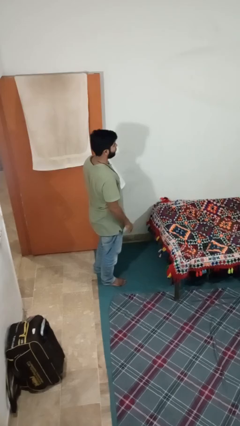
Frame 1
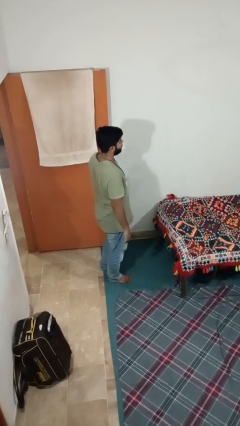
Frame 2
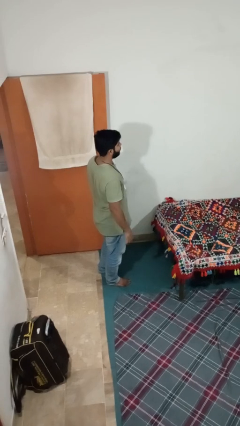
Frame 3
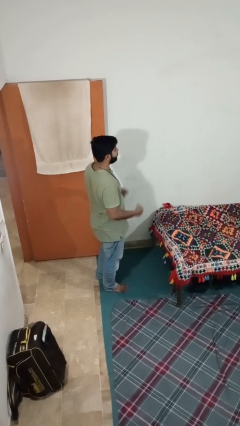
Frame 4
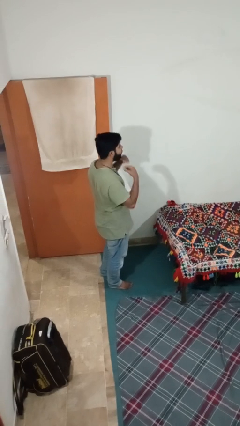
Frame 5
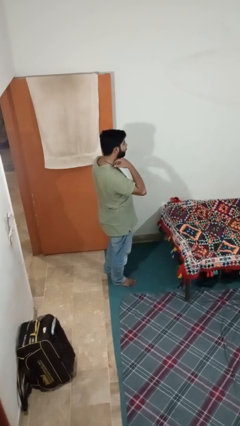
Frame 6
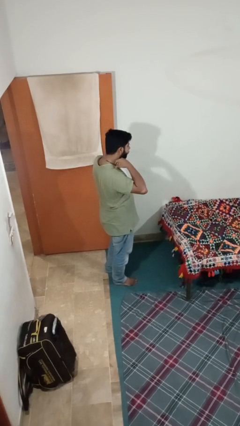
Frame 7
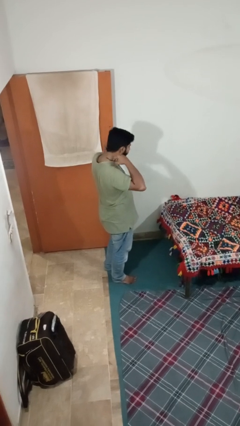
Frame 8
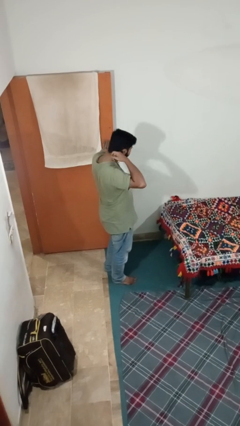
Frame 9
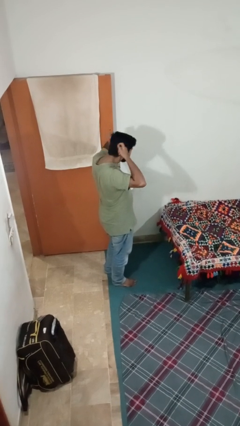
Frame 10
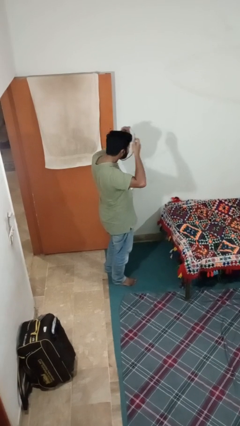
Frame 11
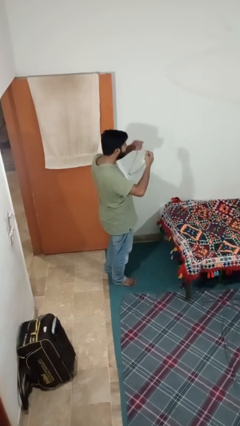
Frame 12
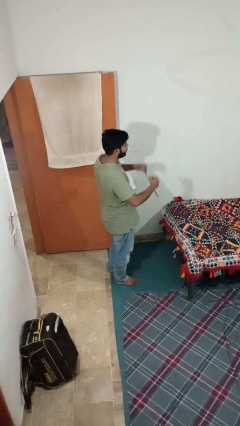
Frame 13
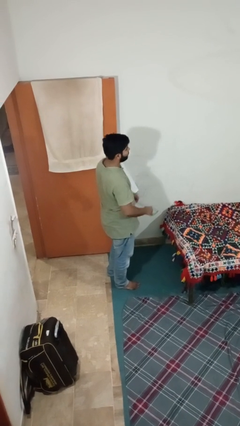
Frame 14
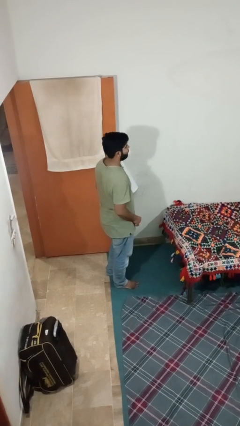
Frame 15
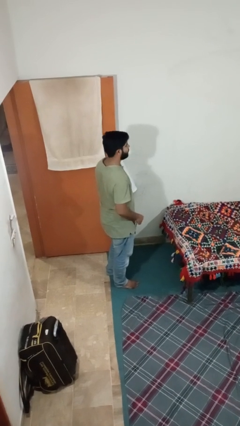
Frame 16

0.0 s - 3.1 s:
person takes off necklace

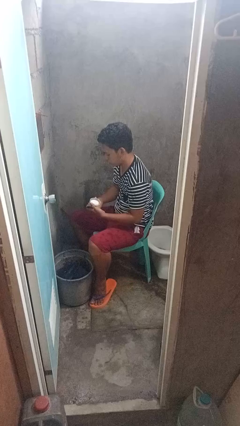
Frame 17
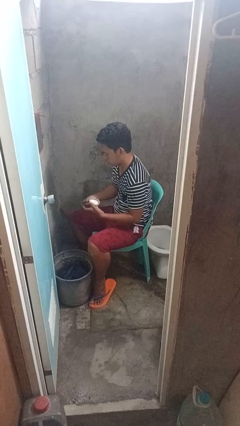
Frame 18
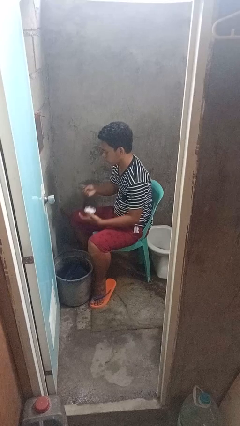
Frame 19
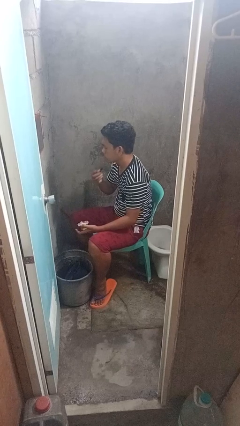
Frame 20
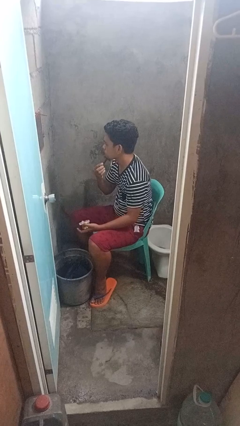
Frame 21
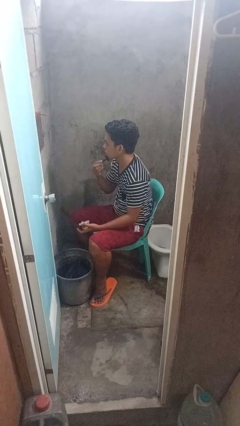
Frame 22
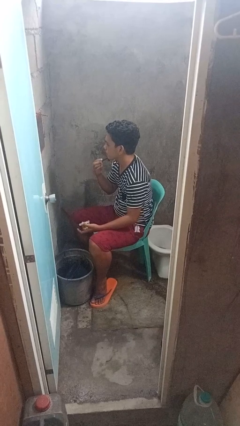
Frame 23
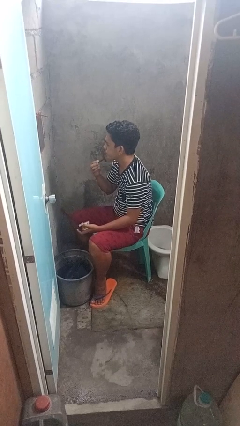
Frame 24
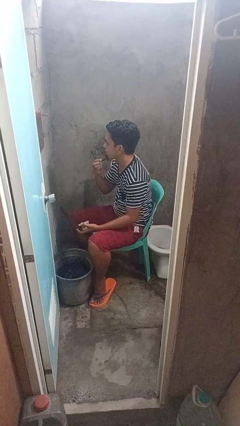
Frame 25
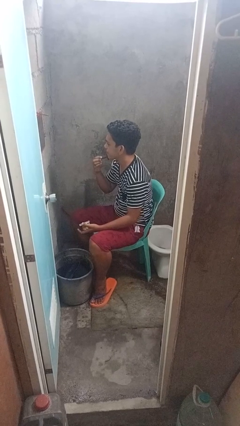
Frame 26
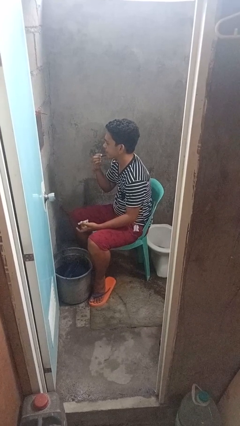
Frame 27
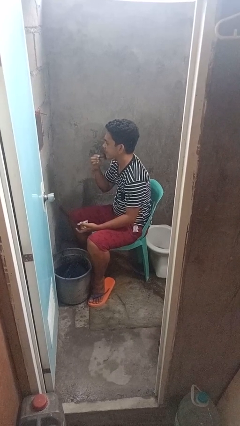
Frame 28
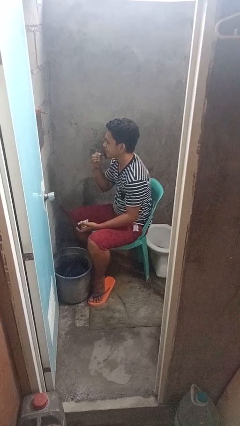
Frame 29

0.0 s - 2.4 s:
person shaves face

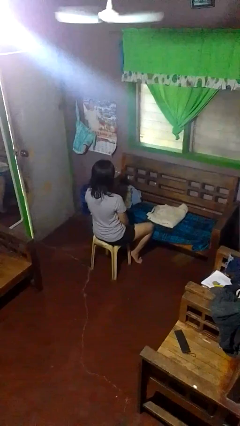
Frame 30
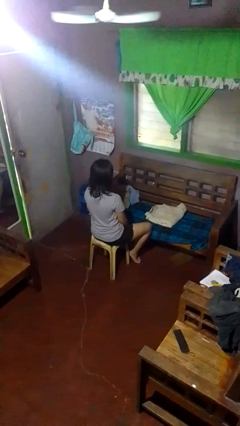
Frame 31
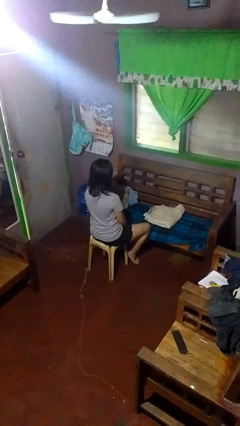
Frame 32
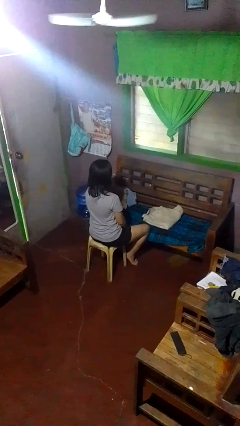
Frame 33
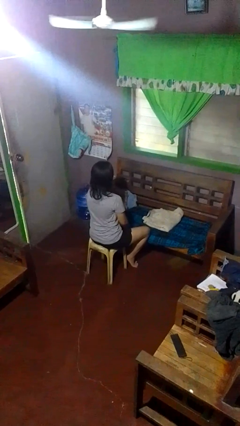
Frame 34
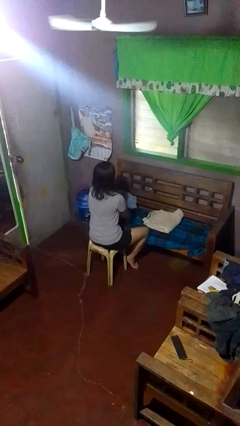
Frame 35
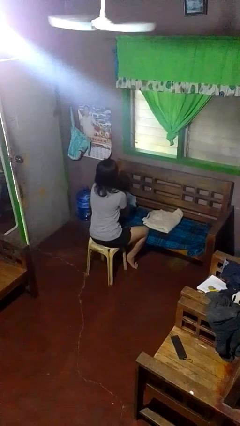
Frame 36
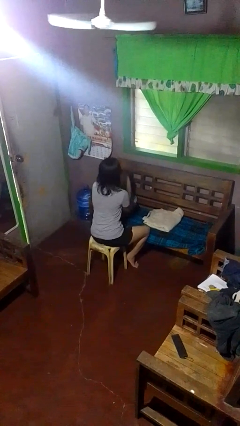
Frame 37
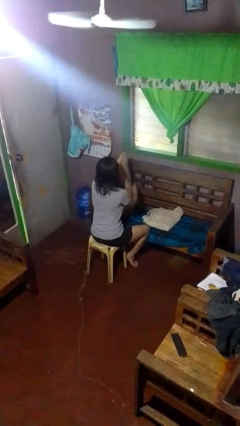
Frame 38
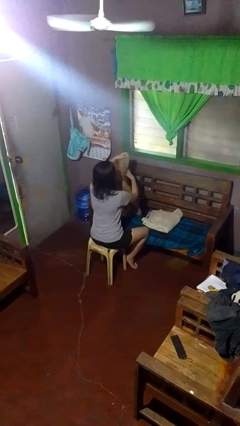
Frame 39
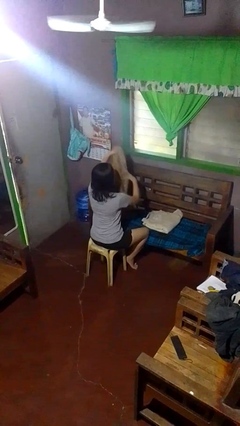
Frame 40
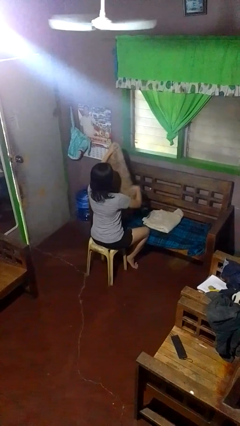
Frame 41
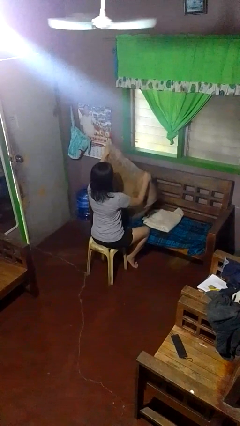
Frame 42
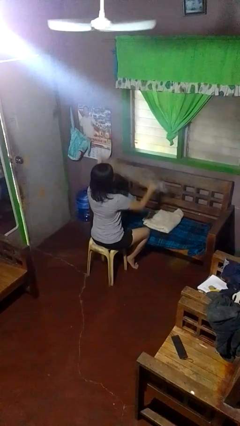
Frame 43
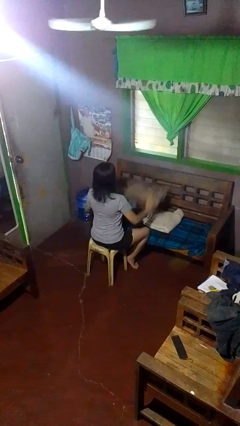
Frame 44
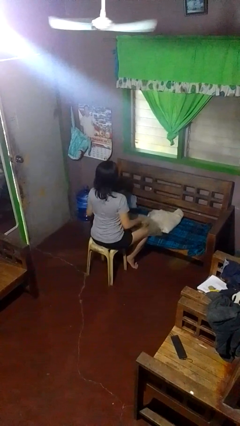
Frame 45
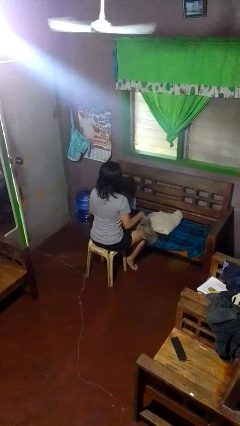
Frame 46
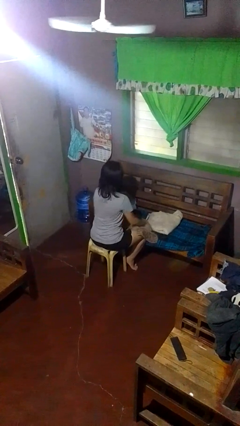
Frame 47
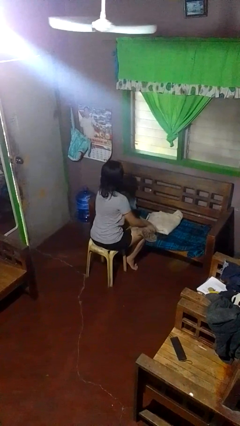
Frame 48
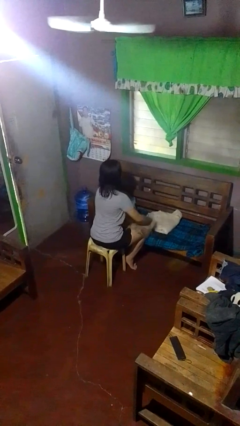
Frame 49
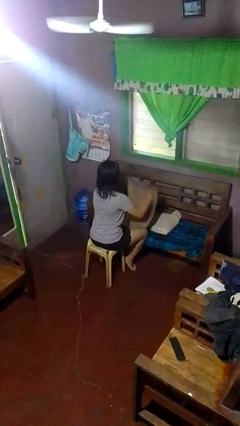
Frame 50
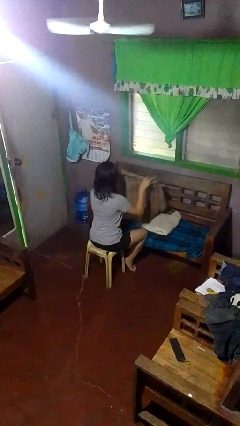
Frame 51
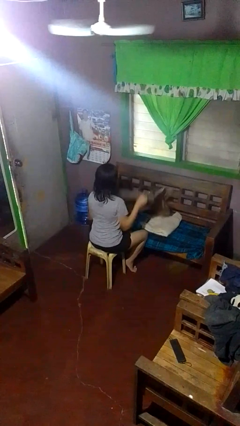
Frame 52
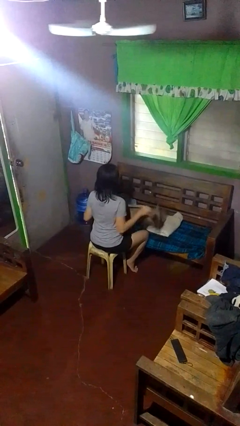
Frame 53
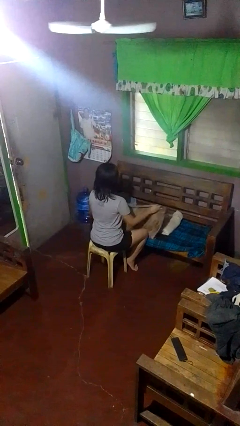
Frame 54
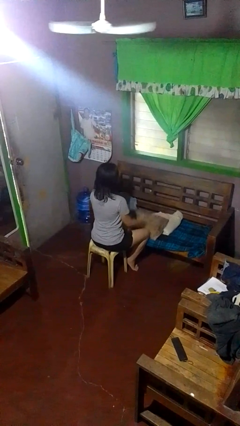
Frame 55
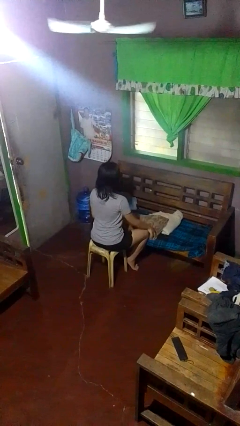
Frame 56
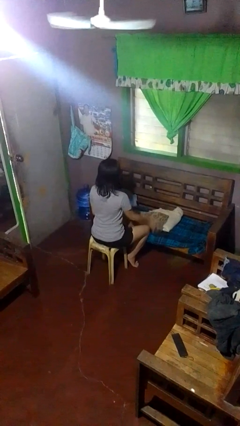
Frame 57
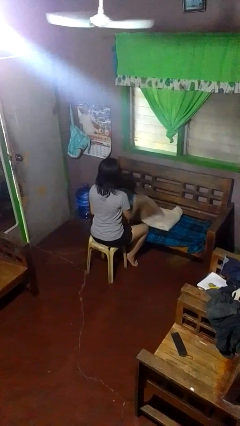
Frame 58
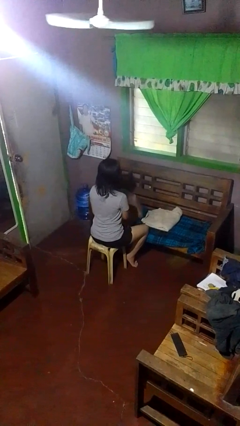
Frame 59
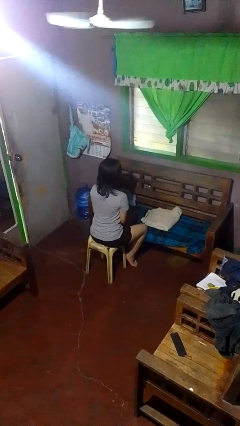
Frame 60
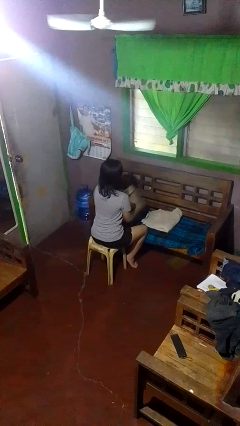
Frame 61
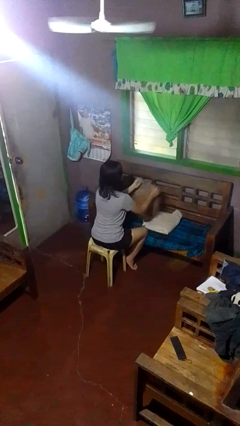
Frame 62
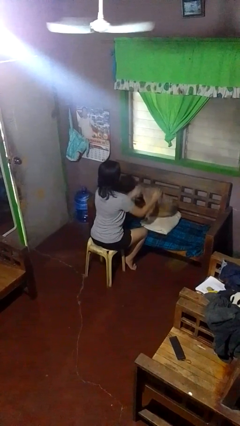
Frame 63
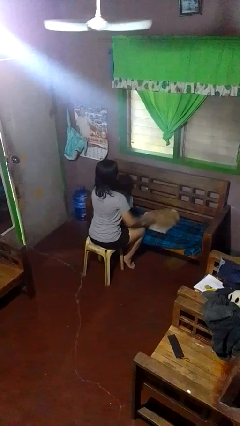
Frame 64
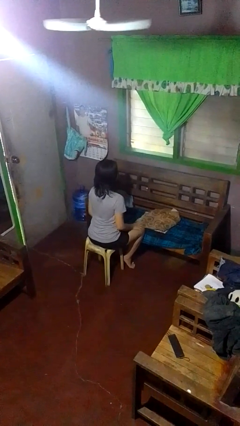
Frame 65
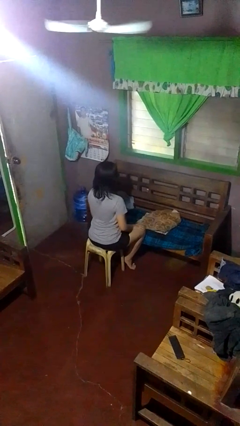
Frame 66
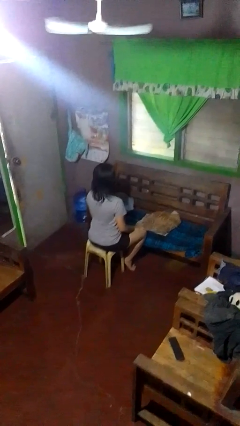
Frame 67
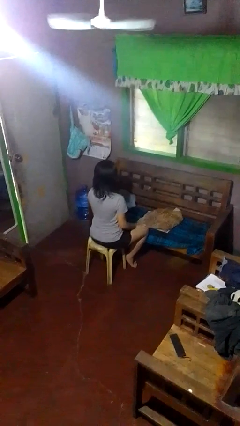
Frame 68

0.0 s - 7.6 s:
person folds towel

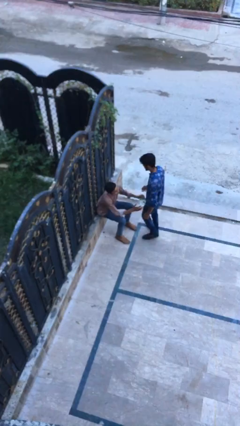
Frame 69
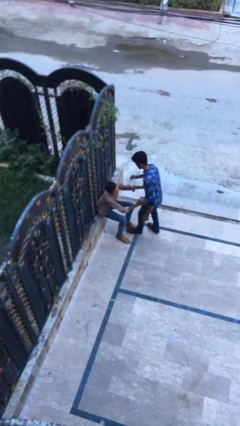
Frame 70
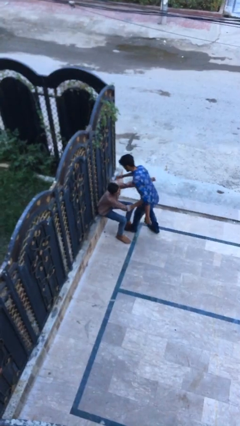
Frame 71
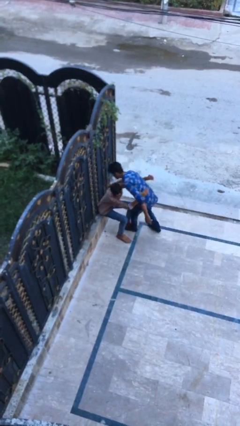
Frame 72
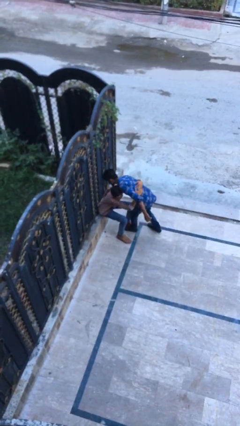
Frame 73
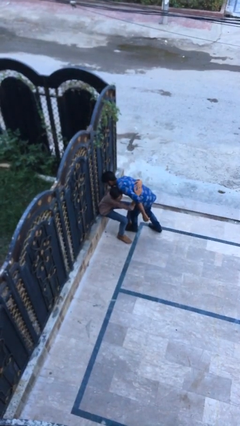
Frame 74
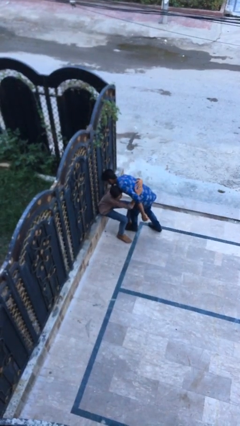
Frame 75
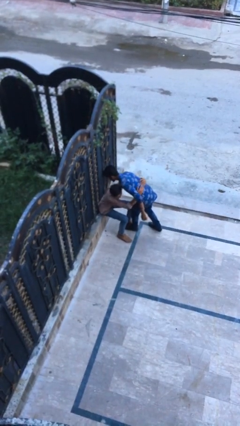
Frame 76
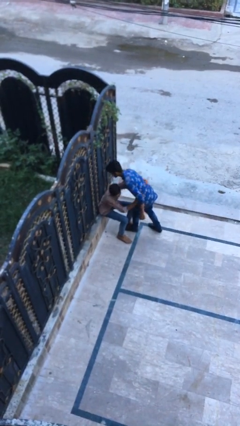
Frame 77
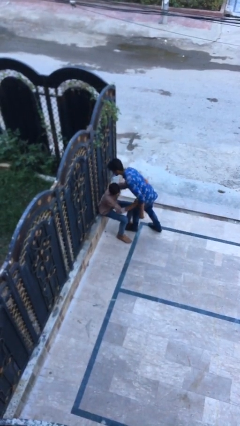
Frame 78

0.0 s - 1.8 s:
person embraces person

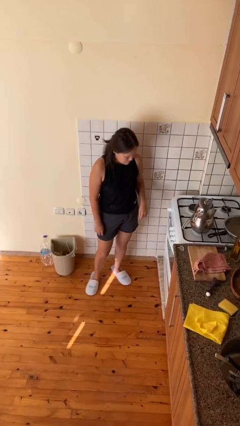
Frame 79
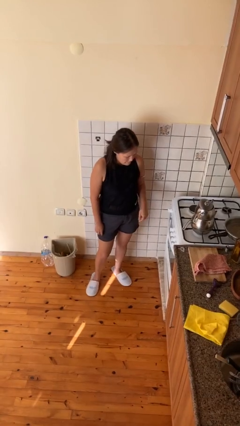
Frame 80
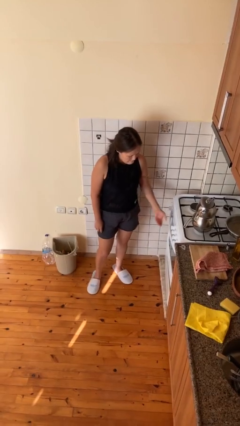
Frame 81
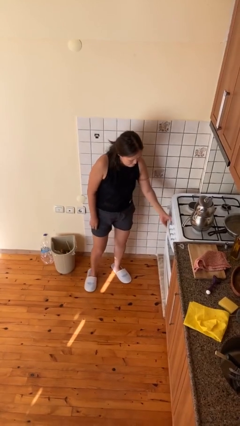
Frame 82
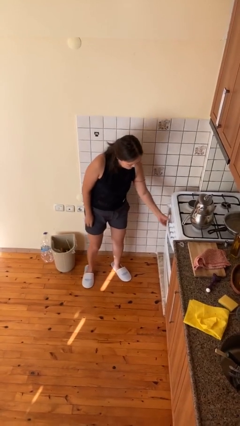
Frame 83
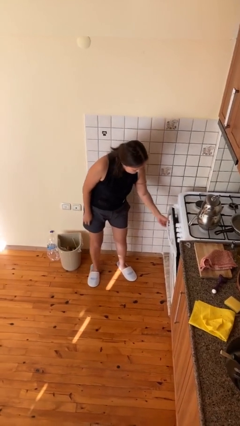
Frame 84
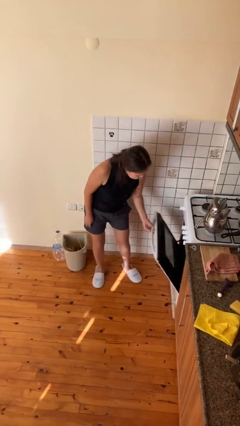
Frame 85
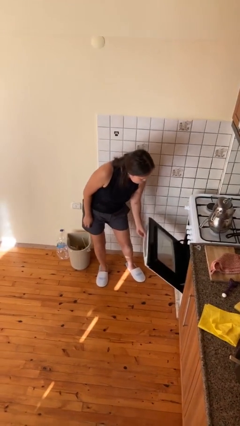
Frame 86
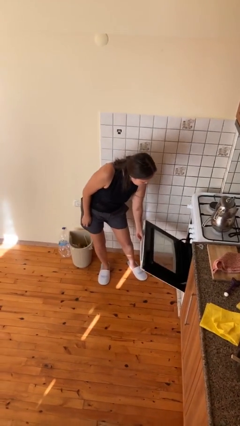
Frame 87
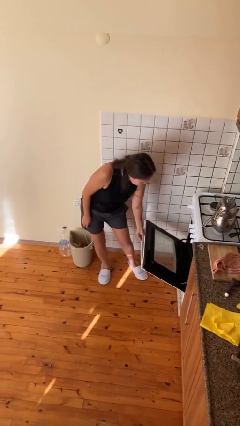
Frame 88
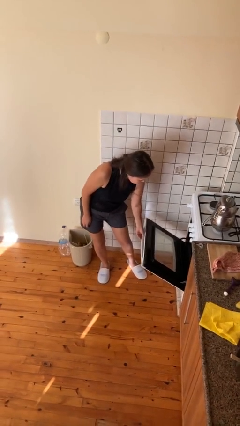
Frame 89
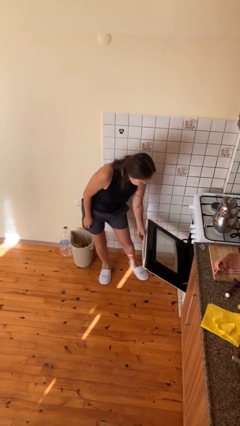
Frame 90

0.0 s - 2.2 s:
person opens oven door

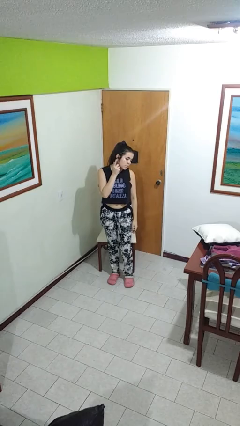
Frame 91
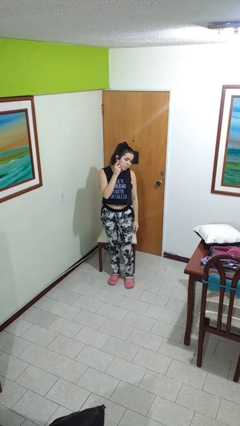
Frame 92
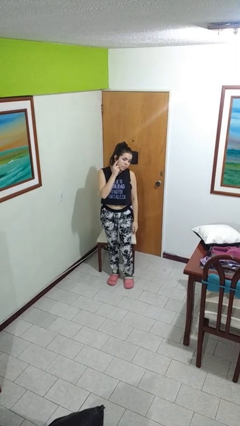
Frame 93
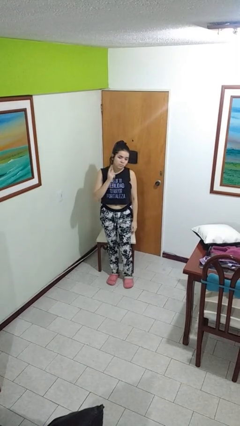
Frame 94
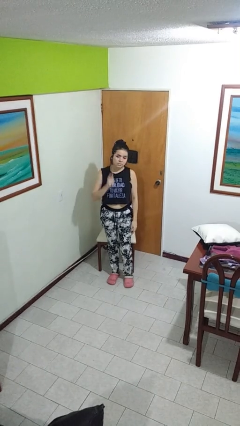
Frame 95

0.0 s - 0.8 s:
person gestures listen closely
